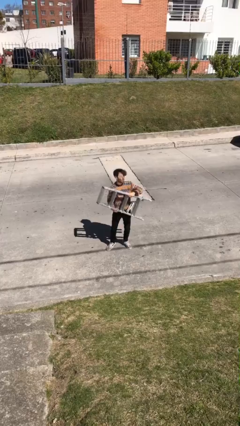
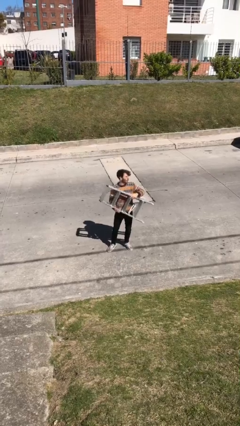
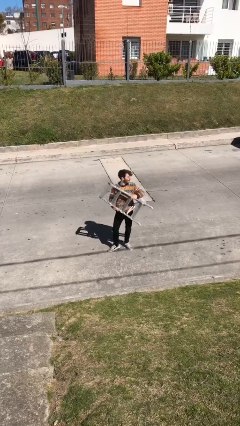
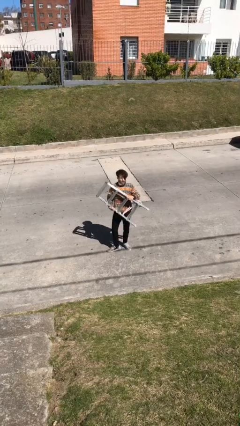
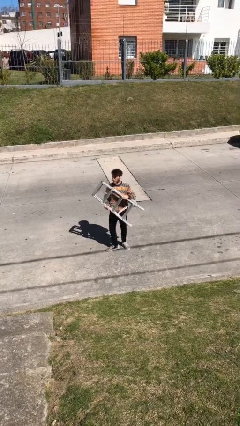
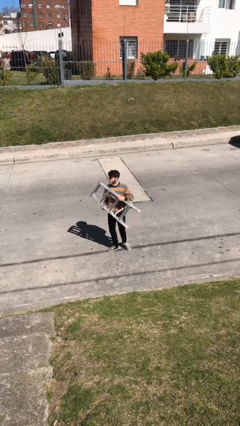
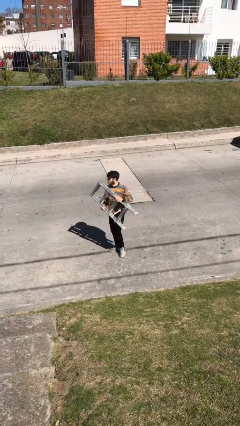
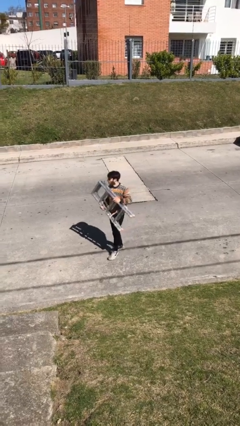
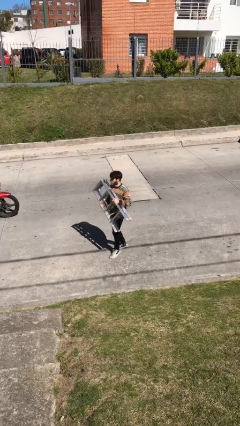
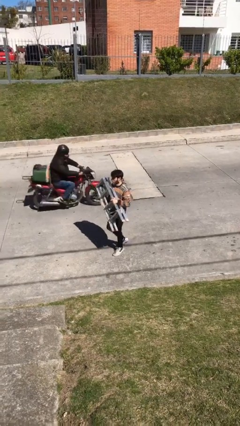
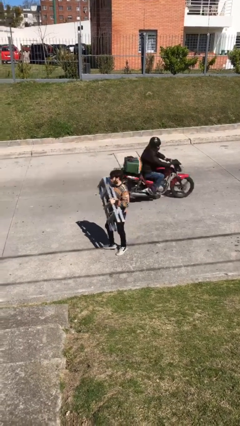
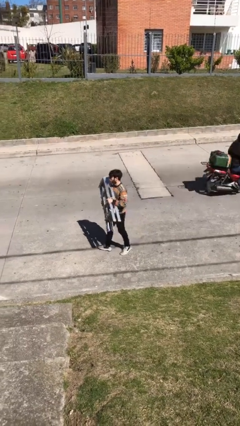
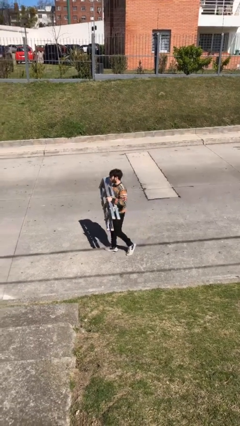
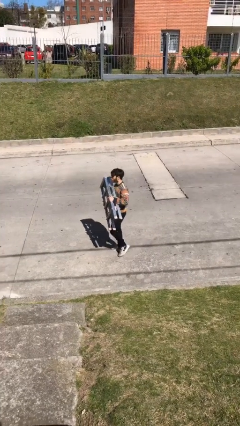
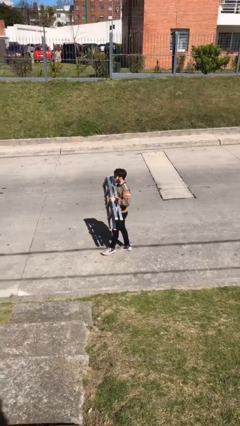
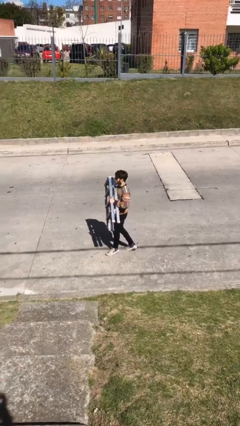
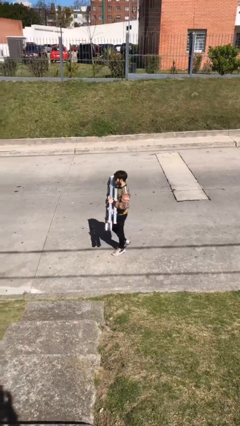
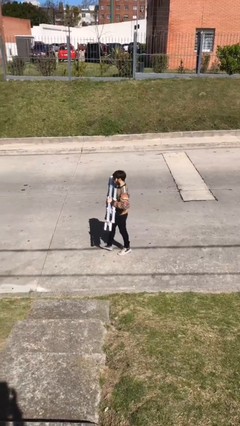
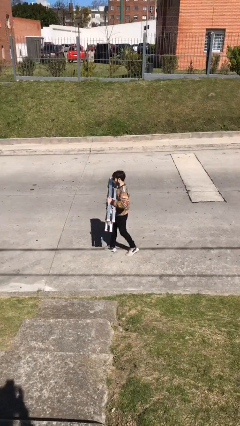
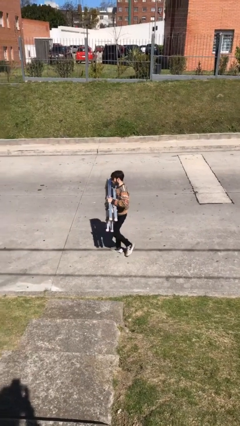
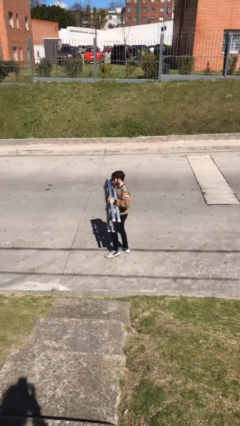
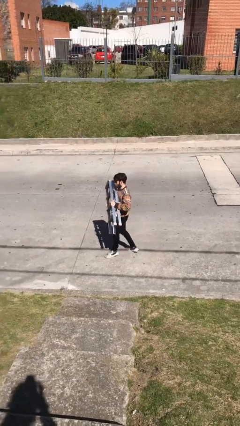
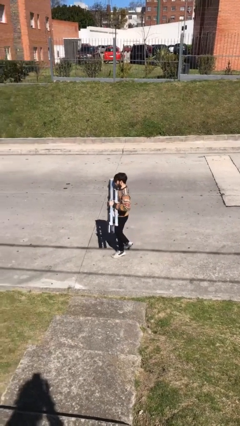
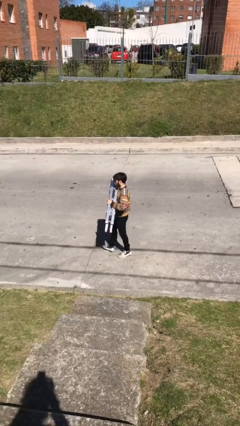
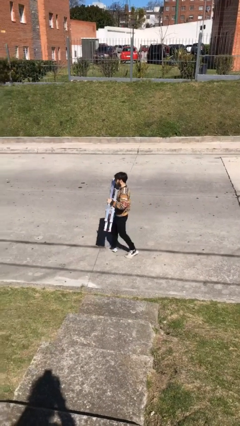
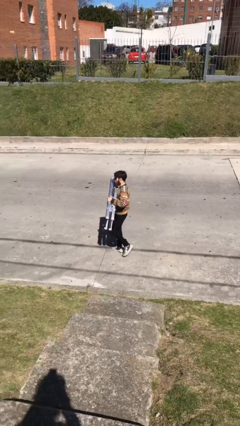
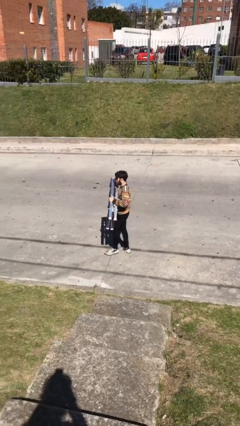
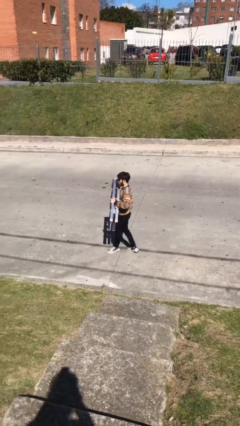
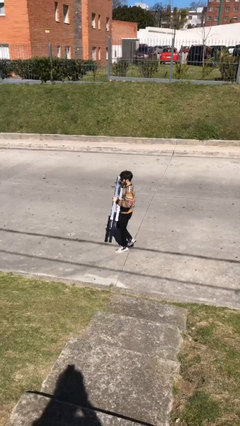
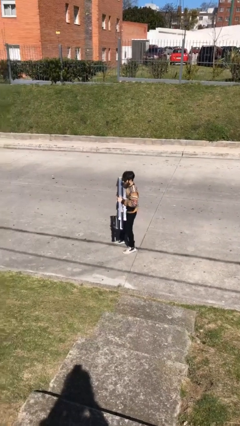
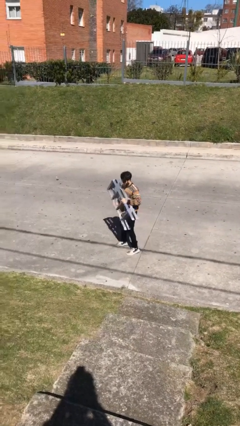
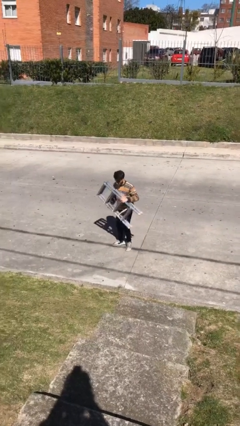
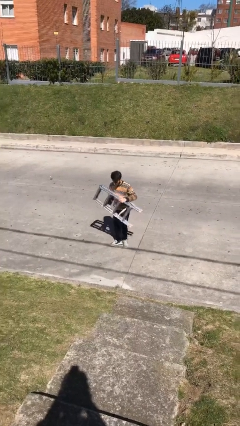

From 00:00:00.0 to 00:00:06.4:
person carries heavy object

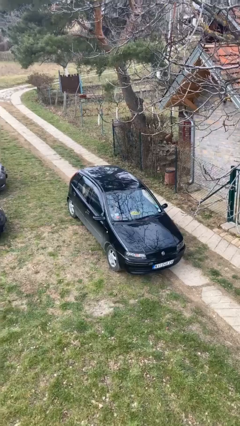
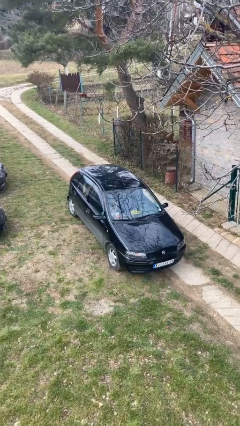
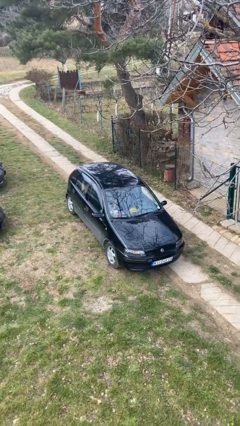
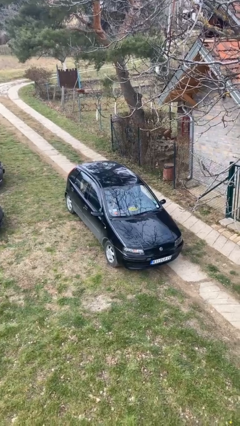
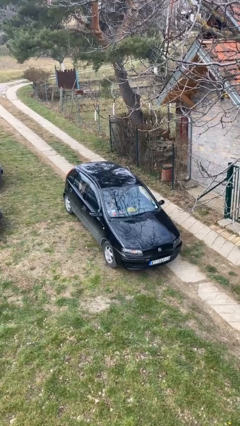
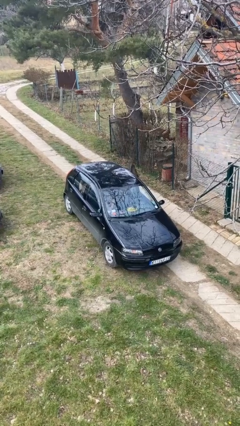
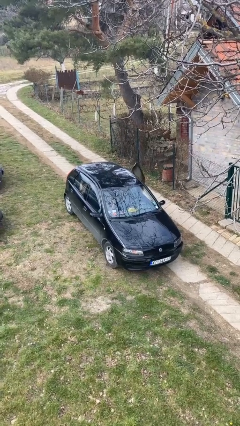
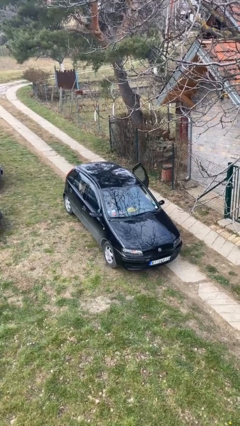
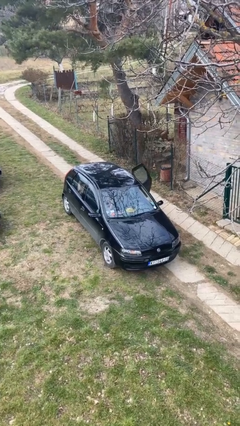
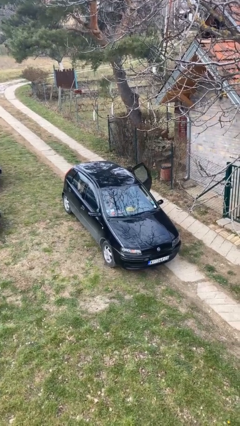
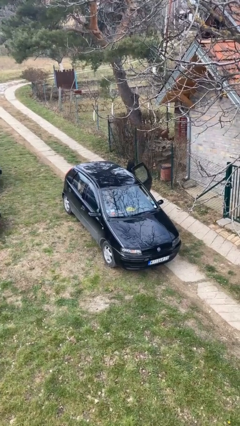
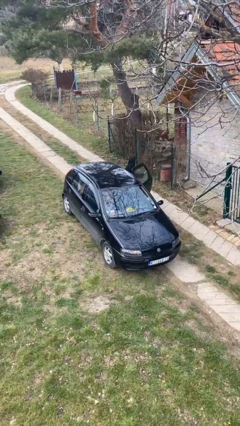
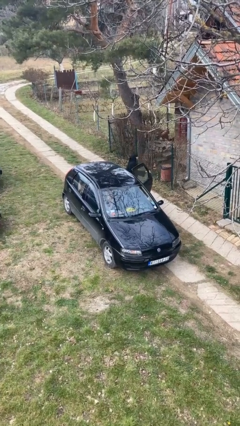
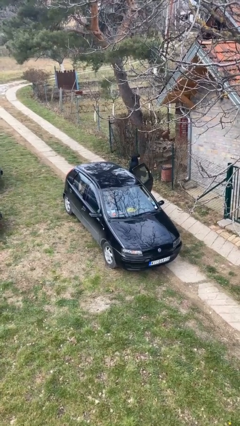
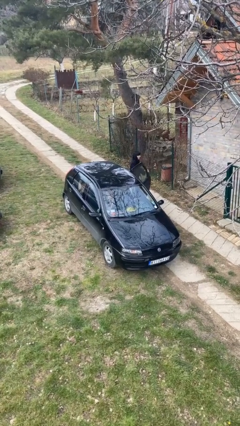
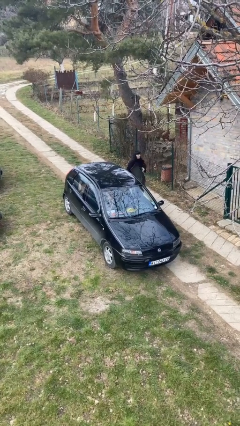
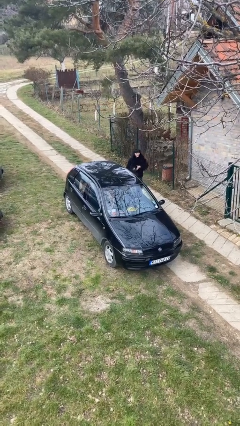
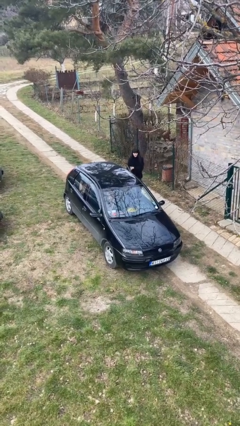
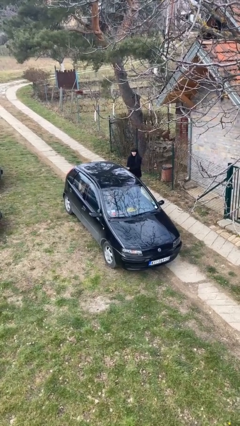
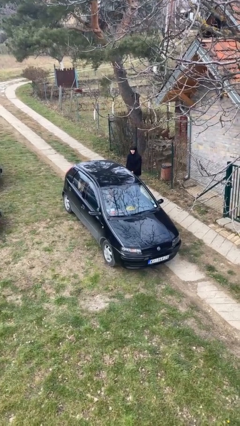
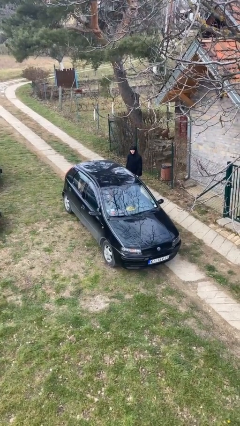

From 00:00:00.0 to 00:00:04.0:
car drops off person

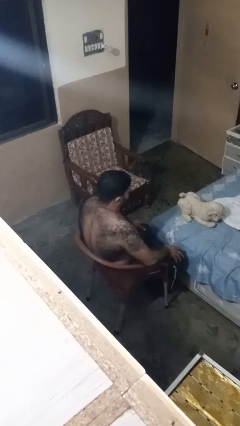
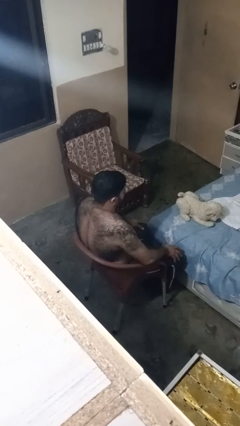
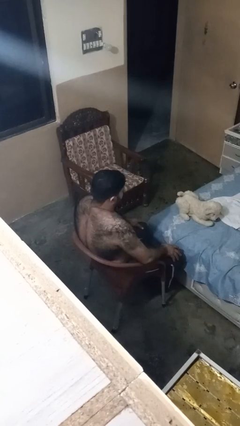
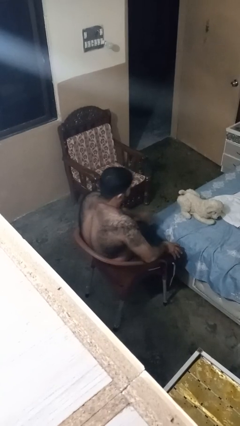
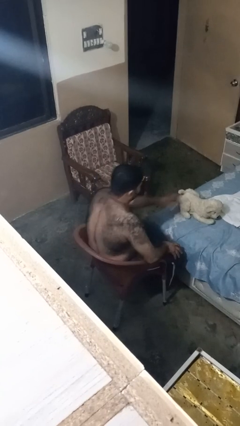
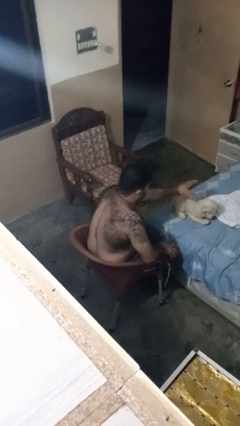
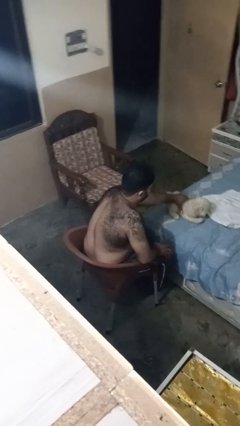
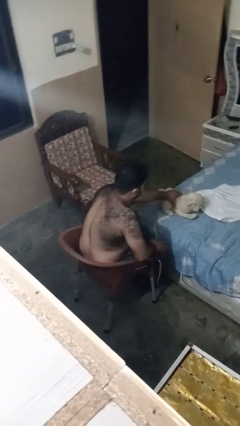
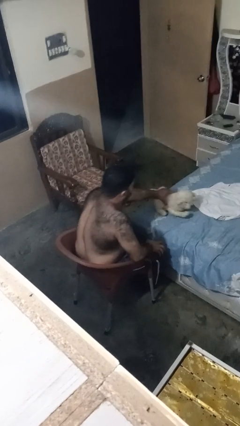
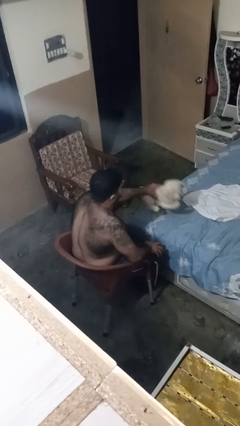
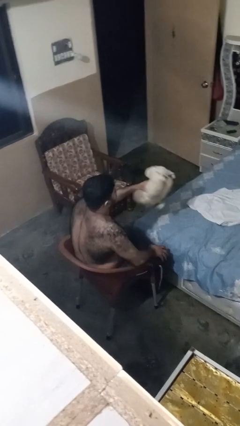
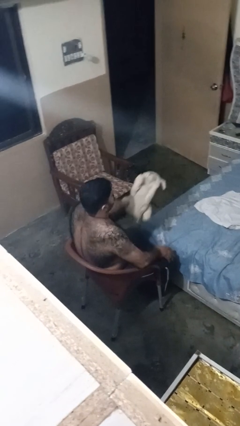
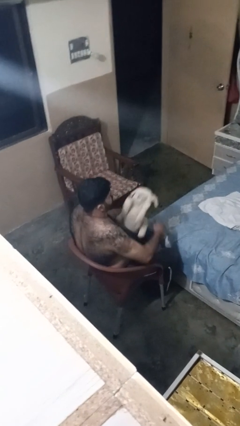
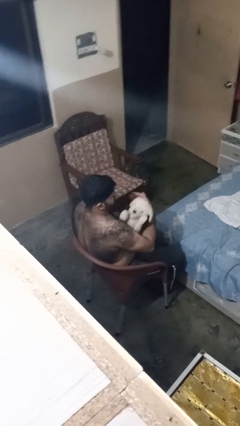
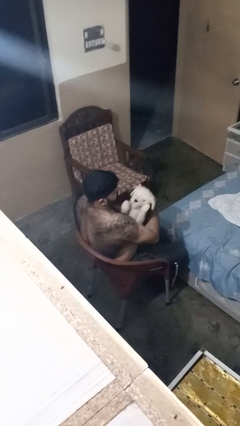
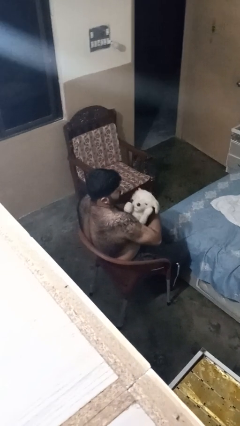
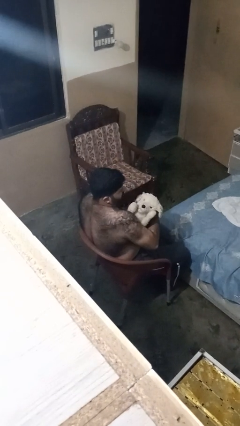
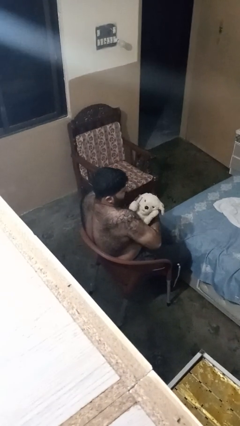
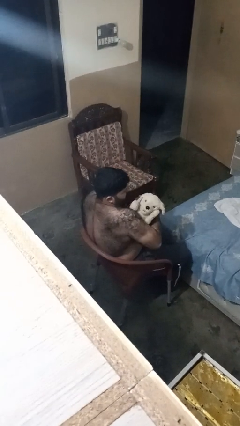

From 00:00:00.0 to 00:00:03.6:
person hugs stuffed animal

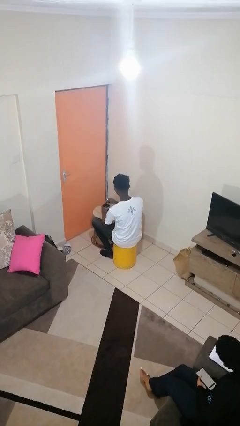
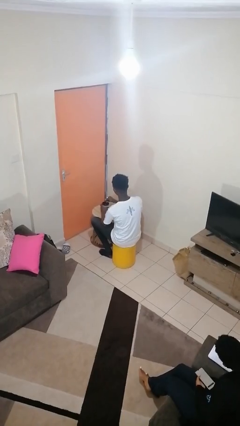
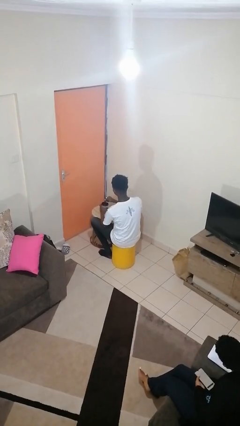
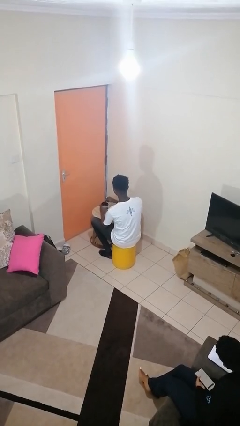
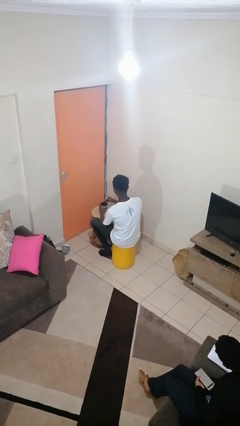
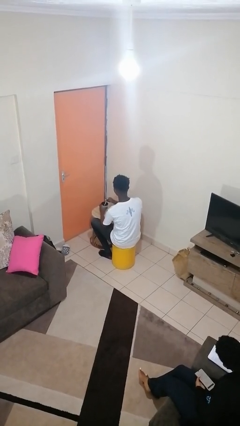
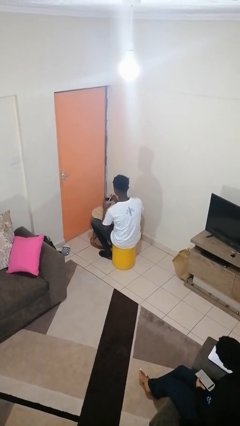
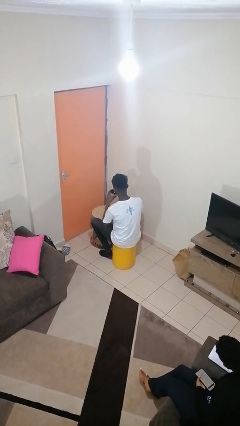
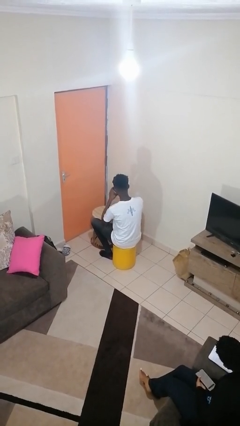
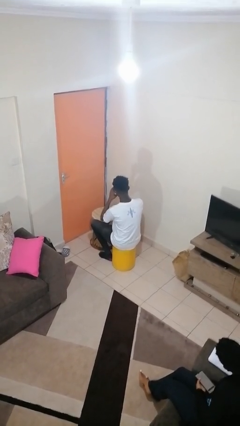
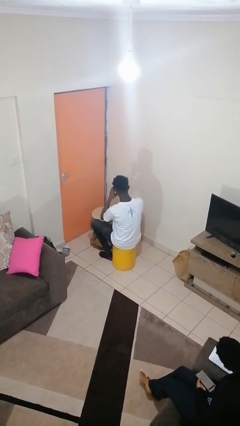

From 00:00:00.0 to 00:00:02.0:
person stirs mug

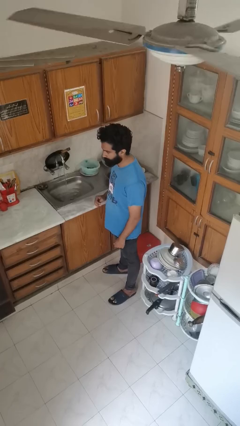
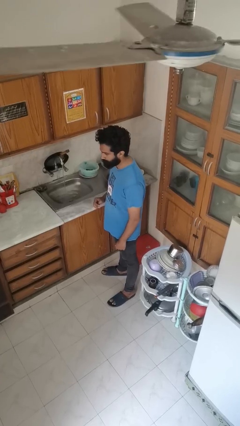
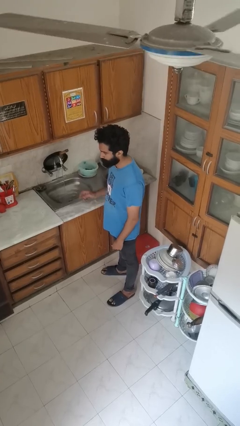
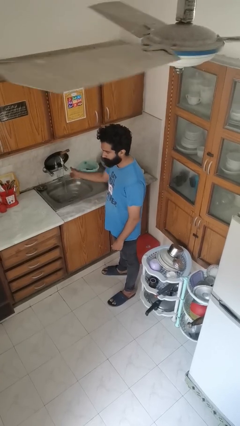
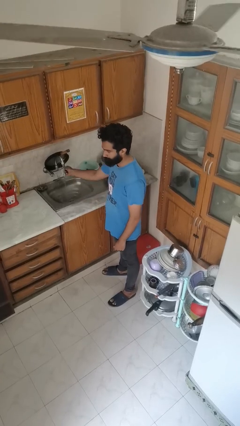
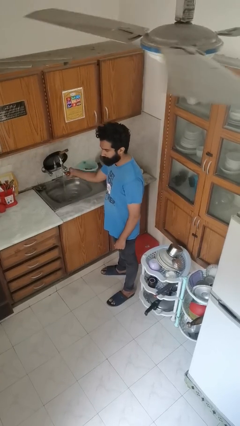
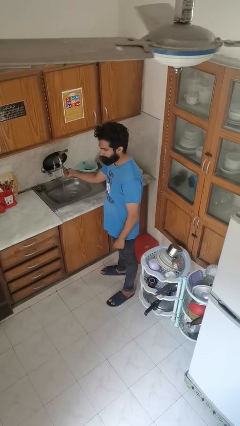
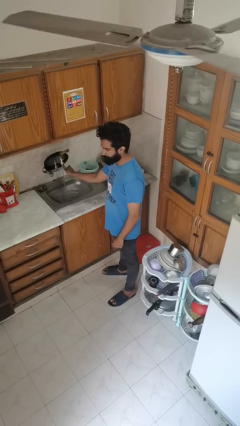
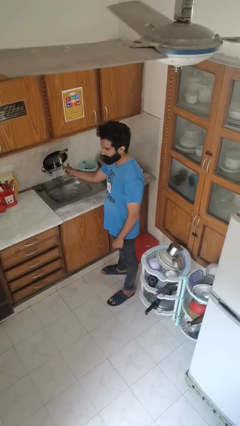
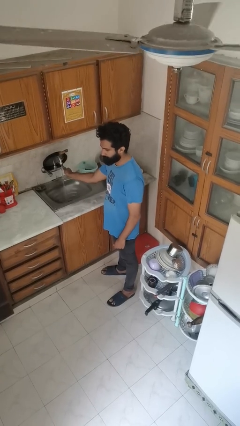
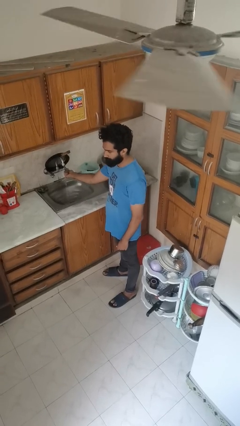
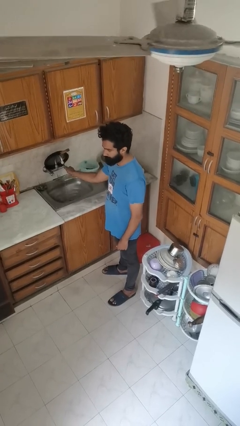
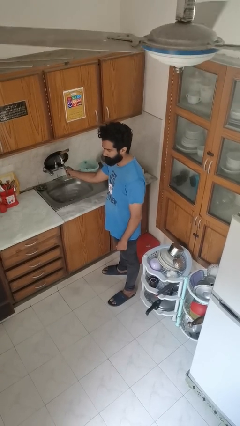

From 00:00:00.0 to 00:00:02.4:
person turns off faucet
